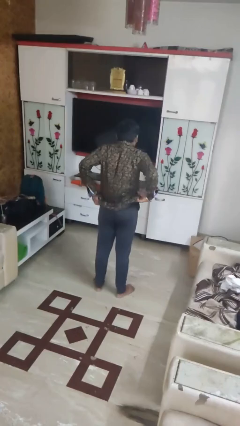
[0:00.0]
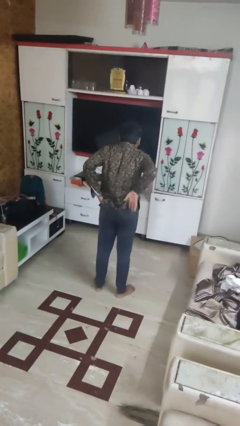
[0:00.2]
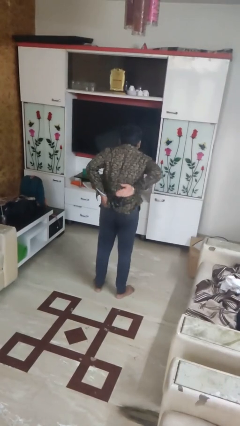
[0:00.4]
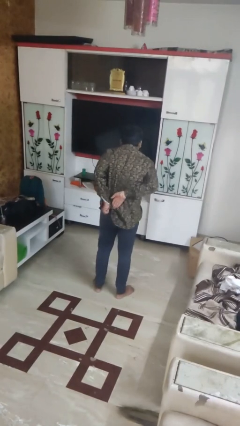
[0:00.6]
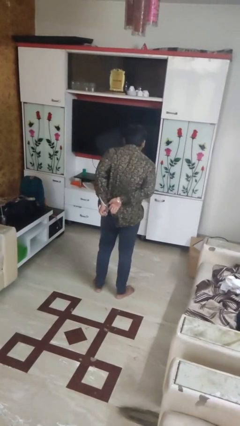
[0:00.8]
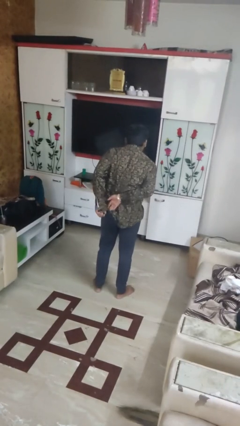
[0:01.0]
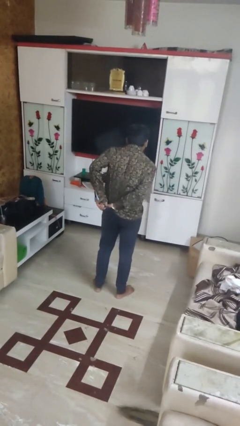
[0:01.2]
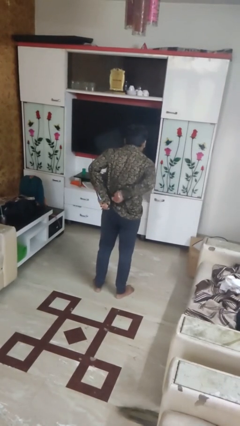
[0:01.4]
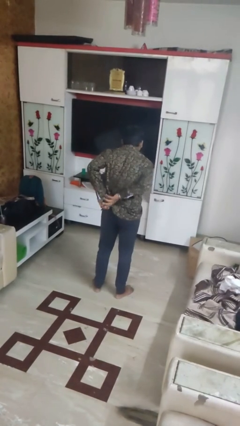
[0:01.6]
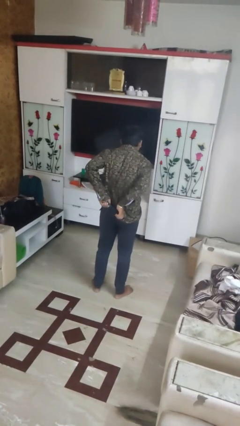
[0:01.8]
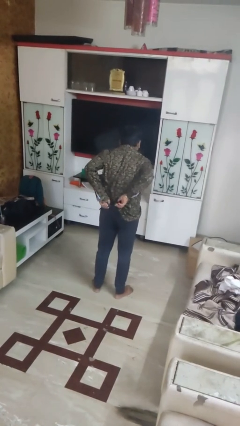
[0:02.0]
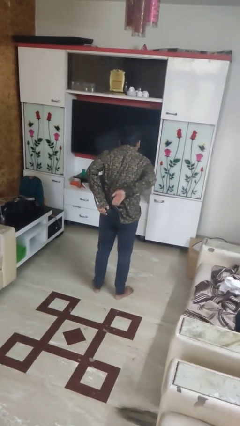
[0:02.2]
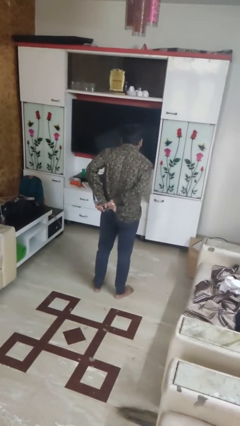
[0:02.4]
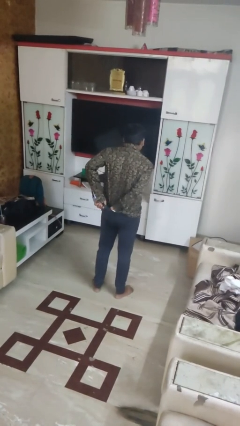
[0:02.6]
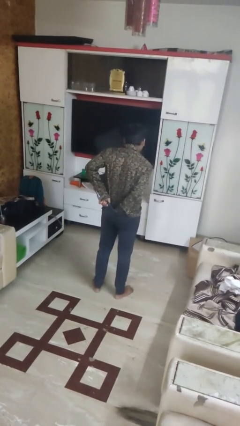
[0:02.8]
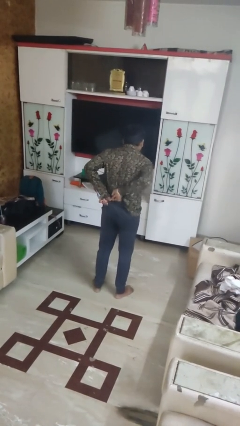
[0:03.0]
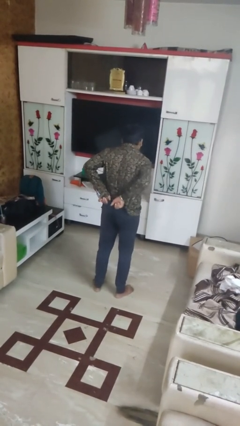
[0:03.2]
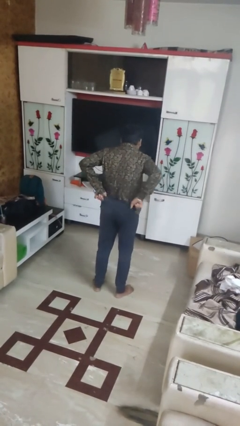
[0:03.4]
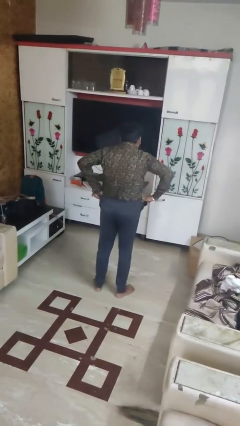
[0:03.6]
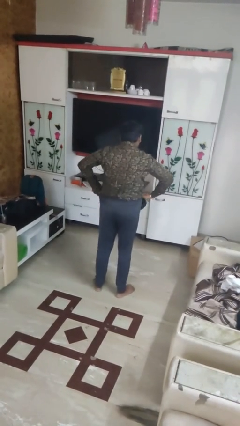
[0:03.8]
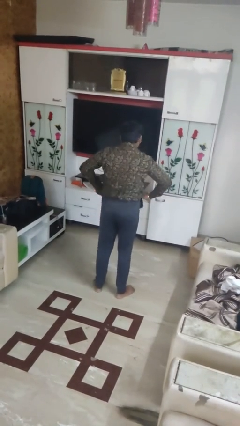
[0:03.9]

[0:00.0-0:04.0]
person tucks in shirt

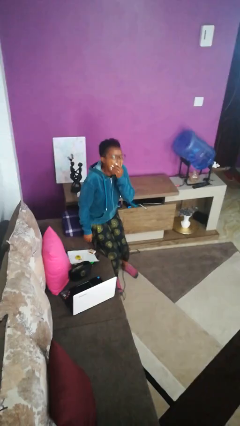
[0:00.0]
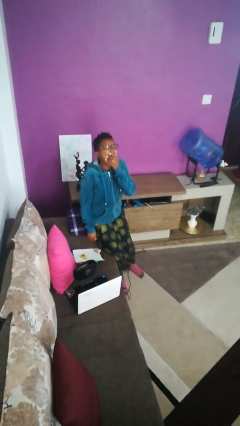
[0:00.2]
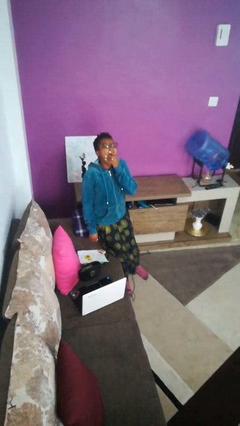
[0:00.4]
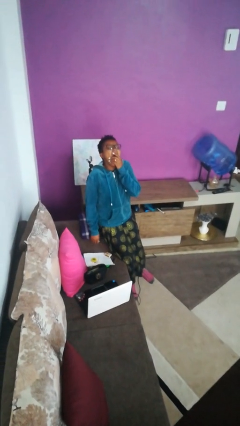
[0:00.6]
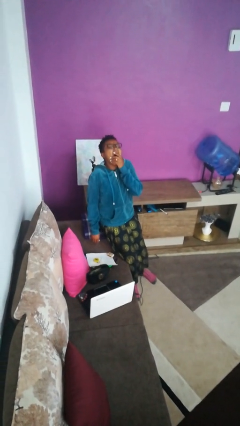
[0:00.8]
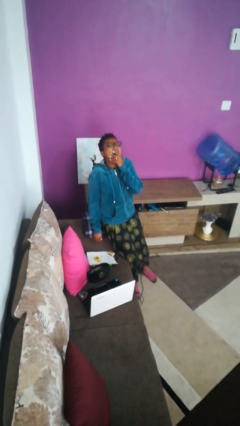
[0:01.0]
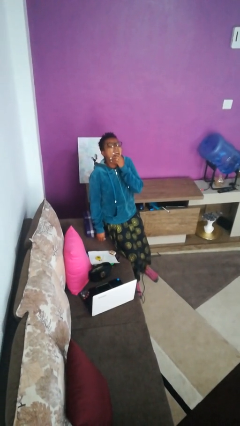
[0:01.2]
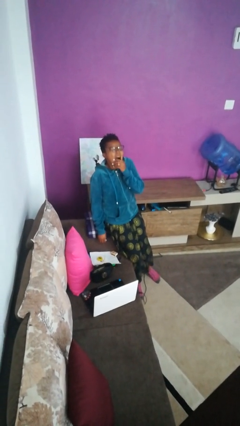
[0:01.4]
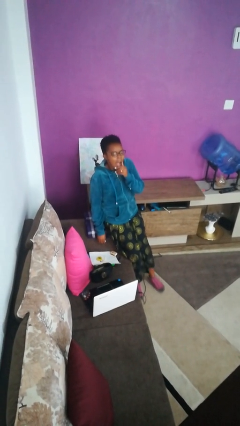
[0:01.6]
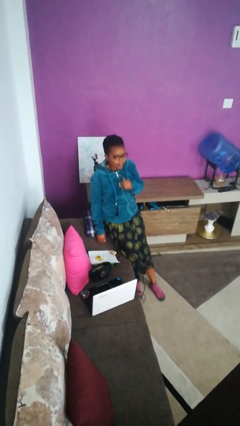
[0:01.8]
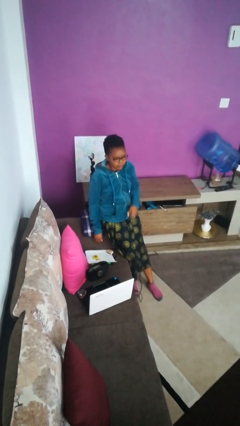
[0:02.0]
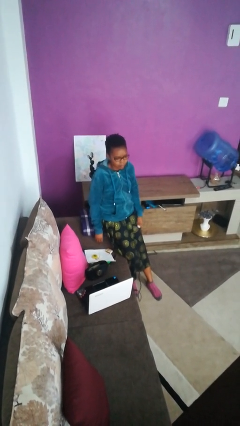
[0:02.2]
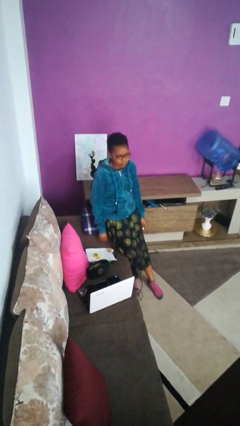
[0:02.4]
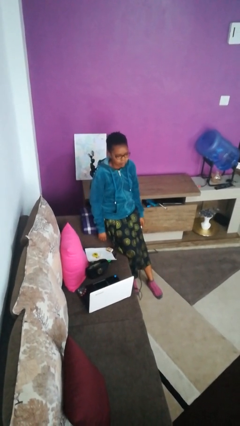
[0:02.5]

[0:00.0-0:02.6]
person yawns

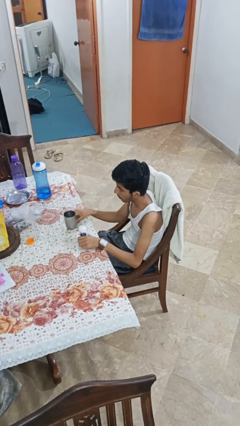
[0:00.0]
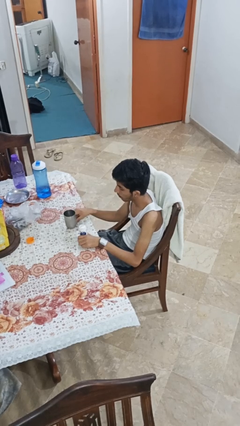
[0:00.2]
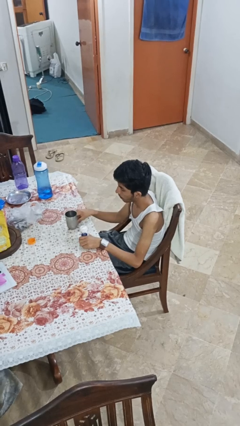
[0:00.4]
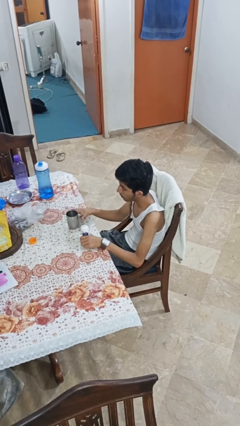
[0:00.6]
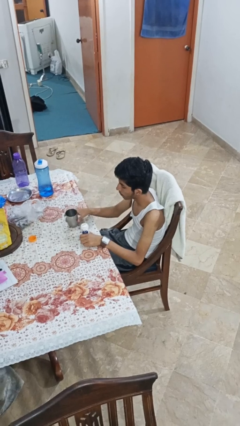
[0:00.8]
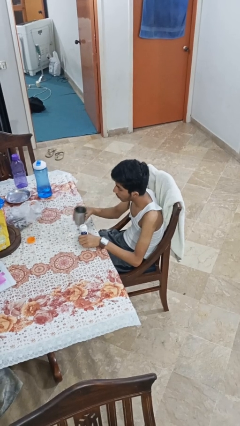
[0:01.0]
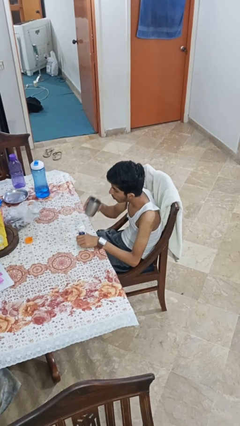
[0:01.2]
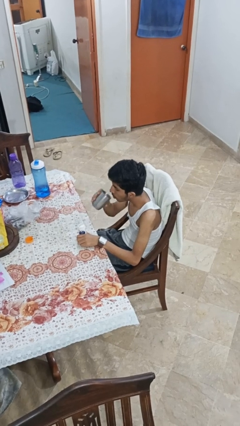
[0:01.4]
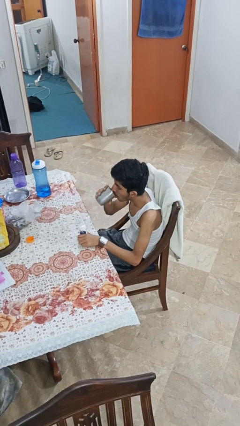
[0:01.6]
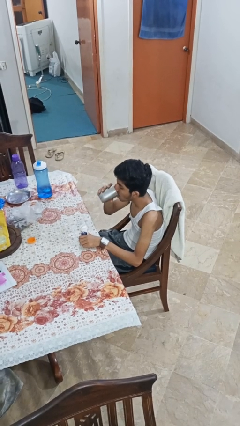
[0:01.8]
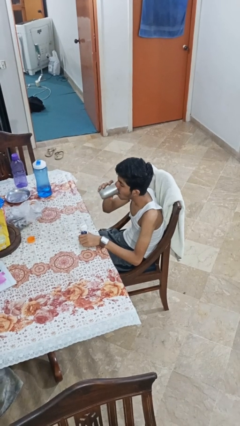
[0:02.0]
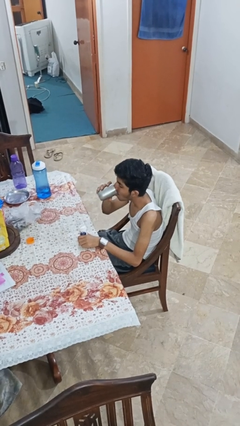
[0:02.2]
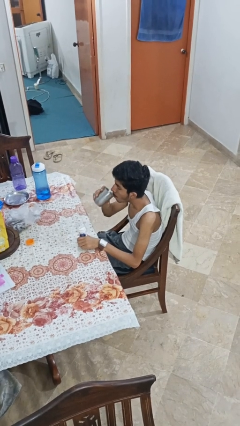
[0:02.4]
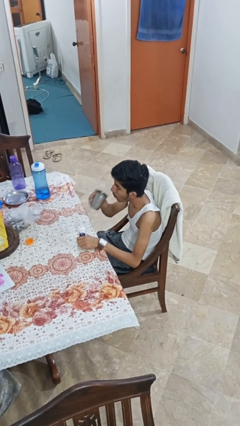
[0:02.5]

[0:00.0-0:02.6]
person drinks from cup

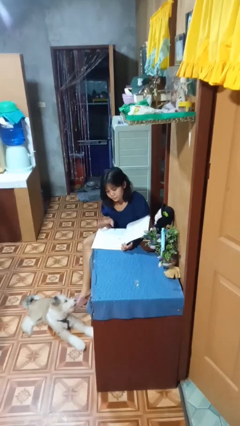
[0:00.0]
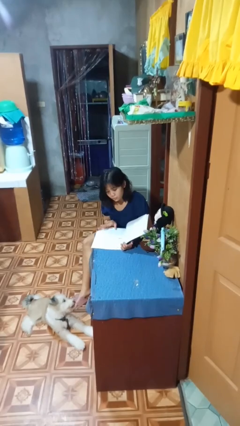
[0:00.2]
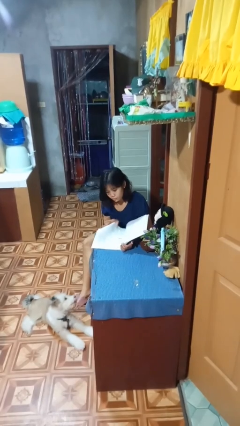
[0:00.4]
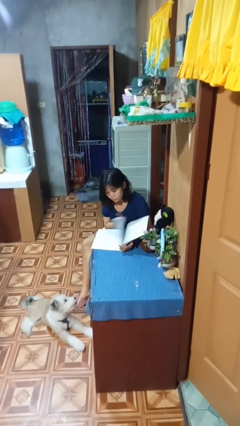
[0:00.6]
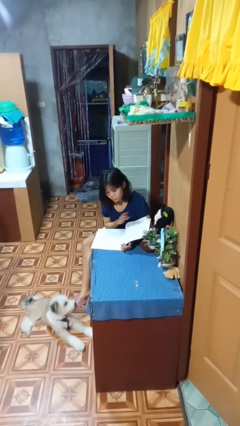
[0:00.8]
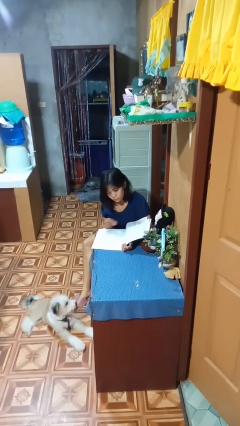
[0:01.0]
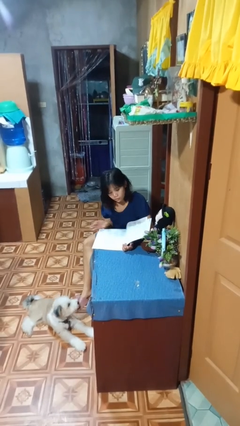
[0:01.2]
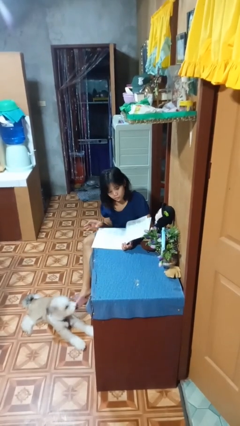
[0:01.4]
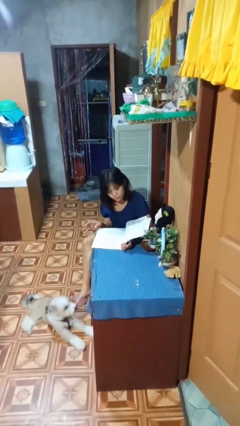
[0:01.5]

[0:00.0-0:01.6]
person reads magazine

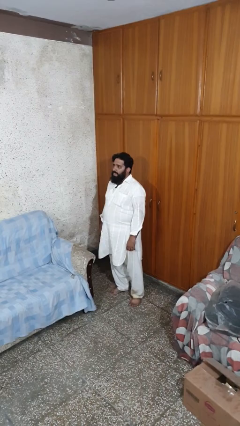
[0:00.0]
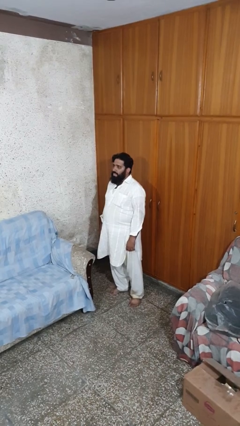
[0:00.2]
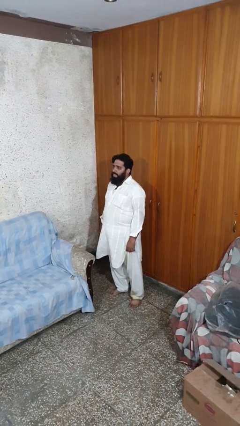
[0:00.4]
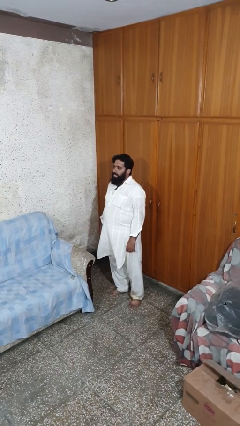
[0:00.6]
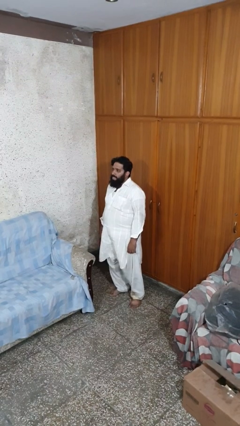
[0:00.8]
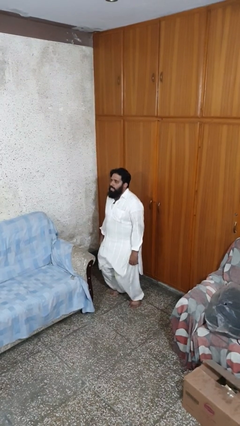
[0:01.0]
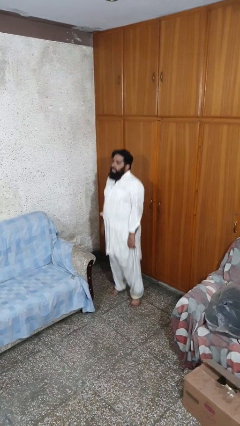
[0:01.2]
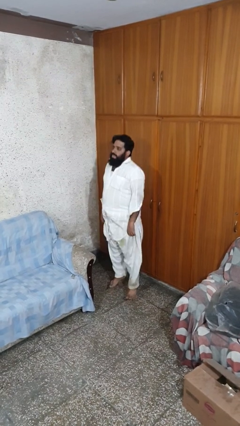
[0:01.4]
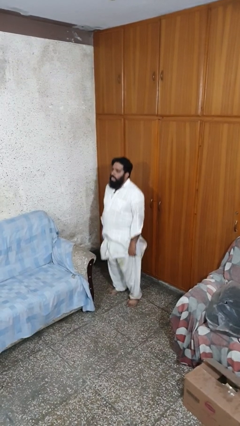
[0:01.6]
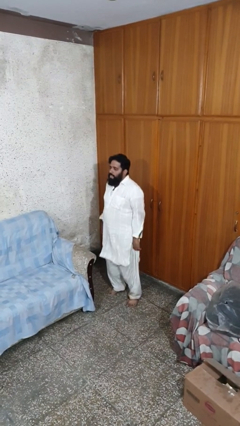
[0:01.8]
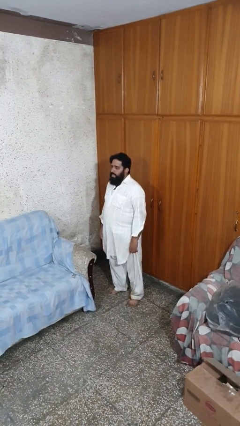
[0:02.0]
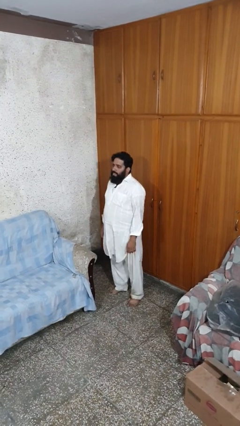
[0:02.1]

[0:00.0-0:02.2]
person jumps

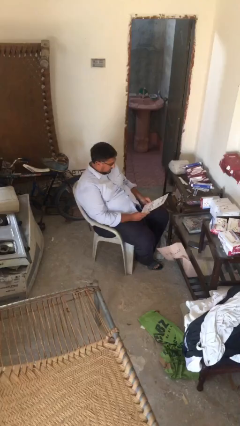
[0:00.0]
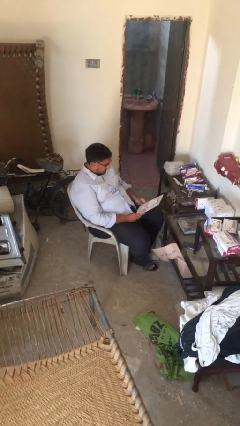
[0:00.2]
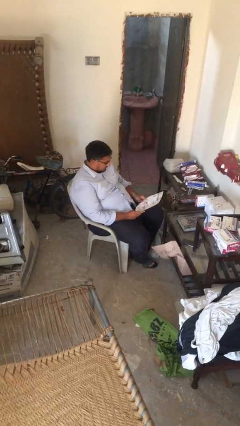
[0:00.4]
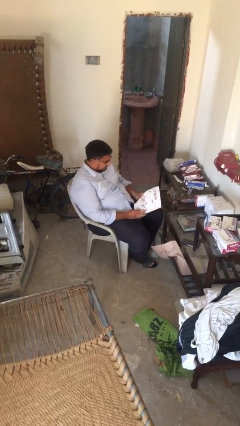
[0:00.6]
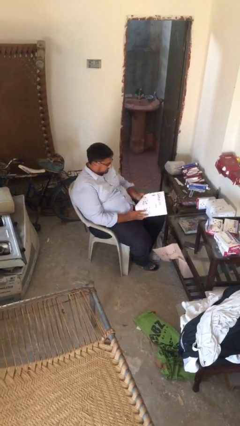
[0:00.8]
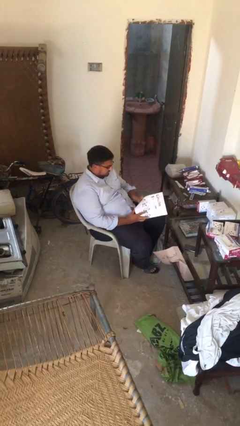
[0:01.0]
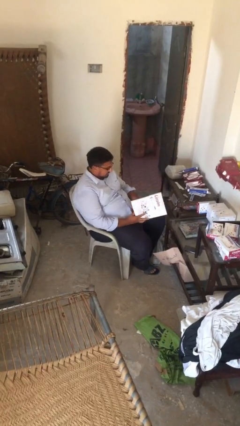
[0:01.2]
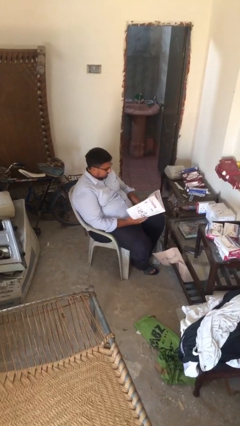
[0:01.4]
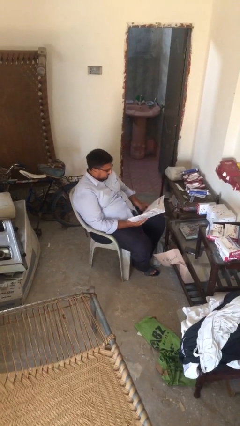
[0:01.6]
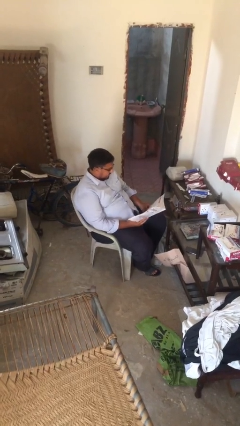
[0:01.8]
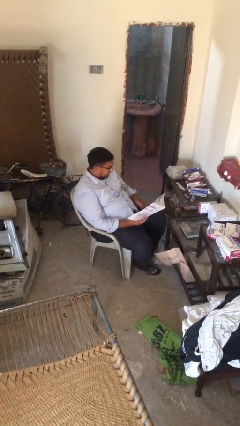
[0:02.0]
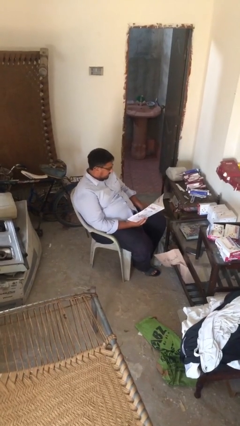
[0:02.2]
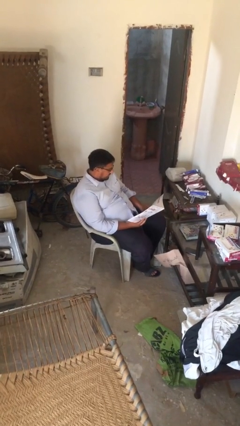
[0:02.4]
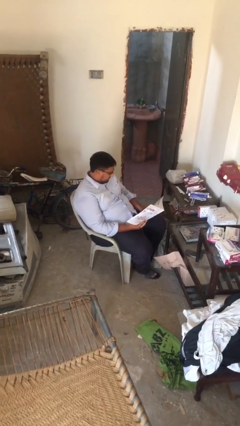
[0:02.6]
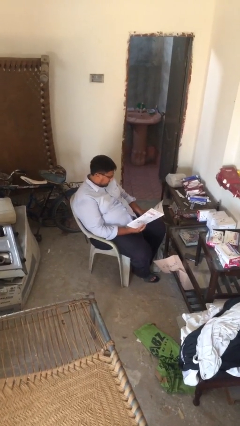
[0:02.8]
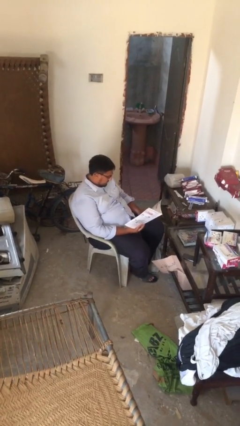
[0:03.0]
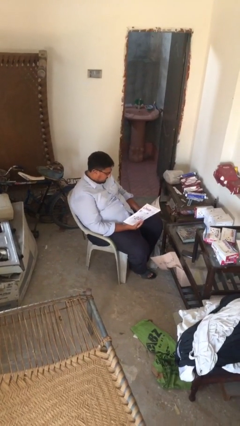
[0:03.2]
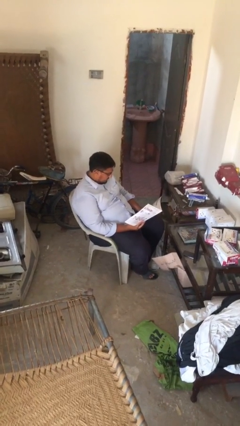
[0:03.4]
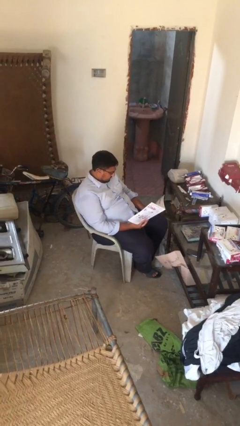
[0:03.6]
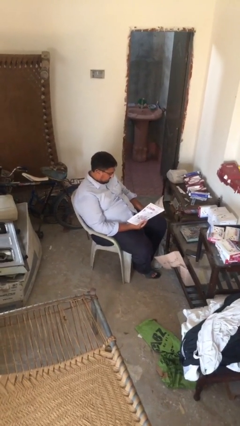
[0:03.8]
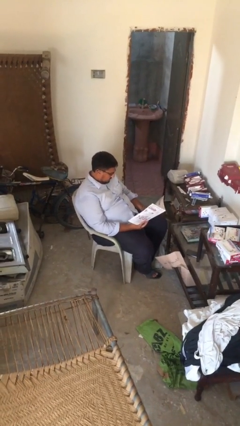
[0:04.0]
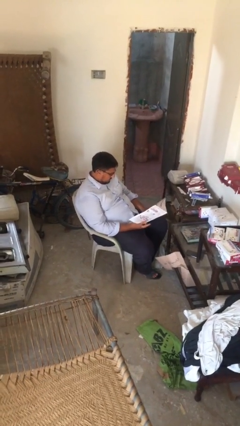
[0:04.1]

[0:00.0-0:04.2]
person reads document

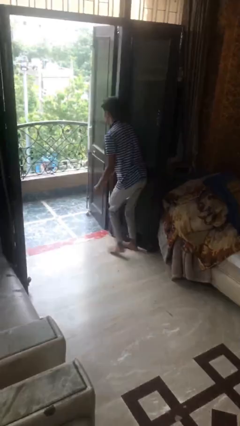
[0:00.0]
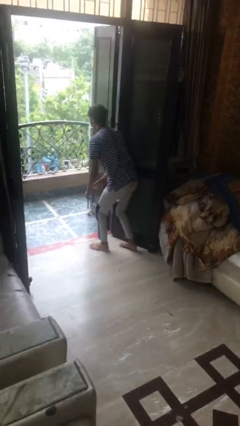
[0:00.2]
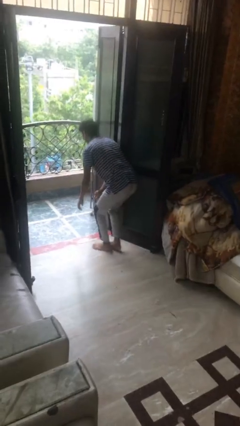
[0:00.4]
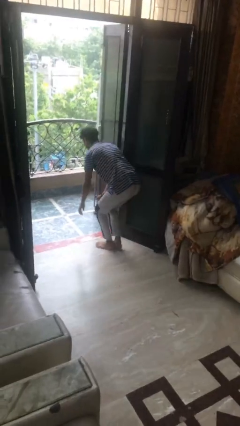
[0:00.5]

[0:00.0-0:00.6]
person trips on object on floor
